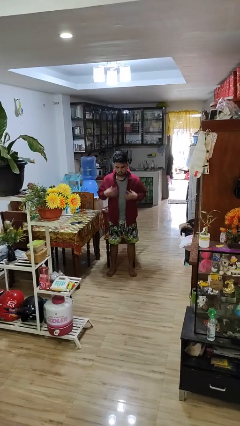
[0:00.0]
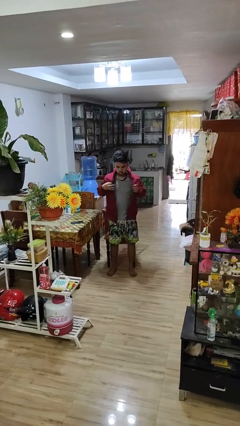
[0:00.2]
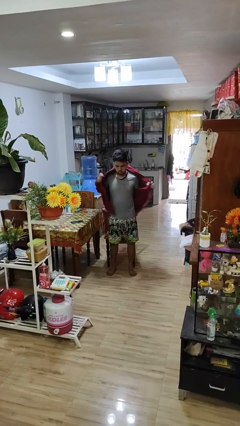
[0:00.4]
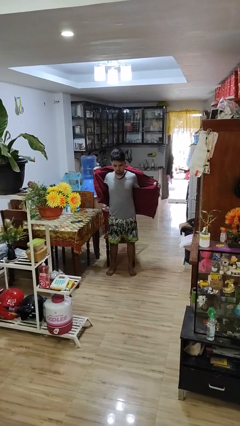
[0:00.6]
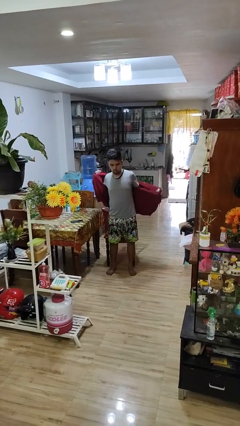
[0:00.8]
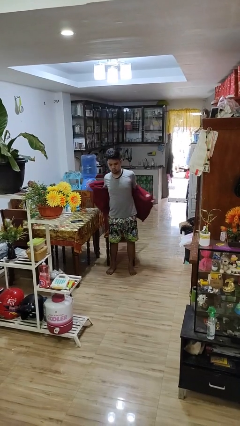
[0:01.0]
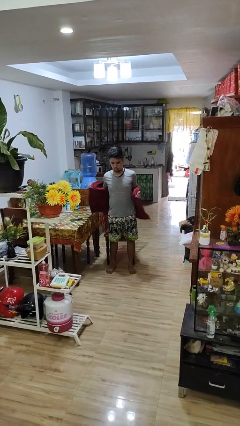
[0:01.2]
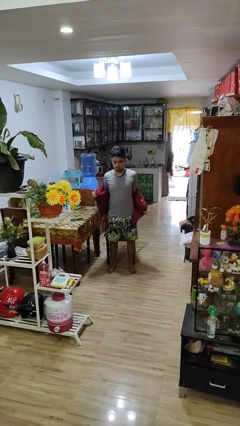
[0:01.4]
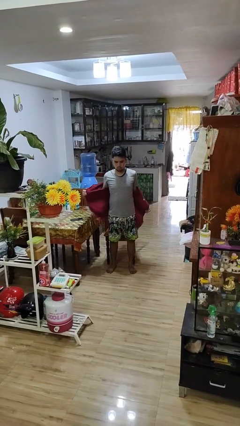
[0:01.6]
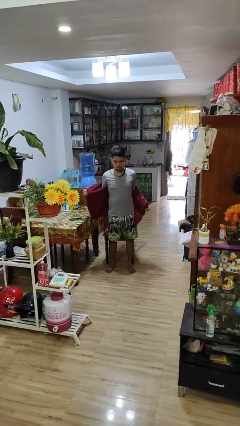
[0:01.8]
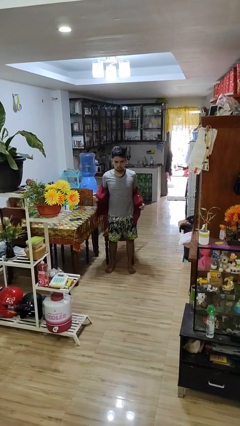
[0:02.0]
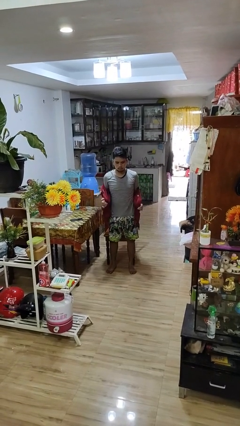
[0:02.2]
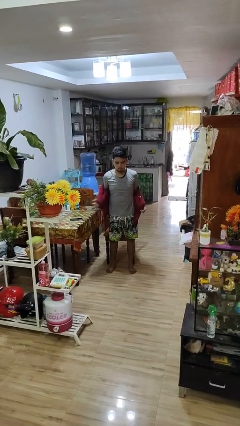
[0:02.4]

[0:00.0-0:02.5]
person takes off jacket

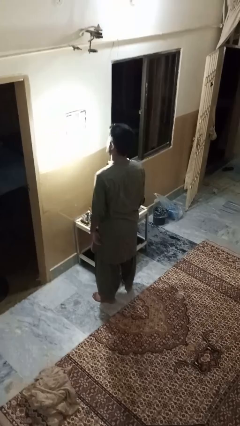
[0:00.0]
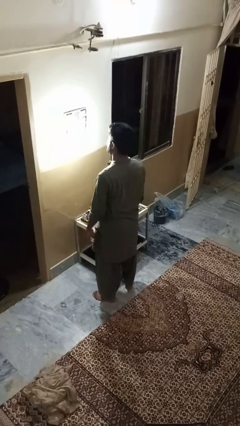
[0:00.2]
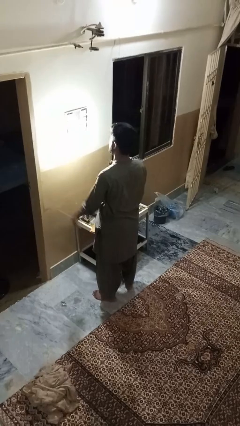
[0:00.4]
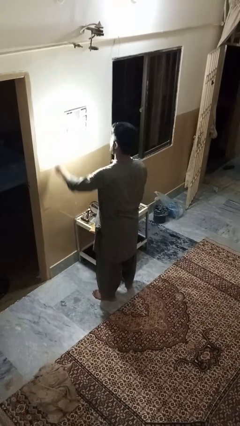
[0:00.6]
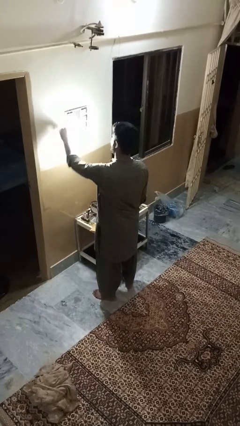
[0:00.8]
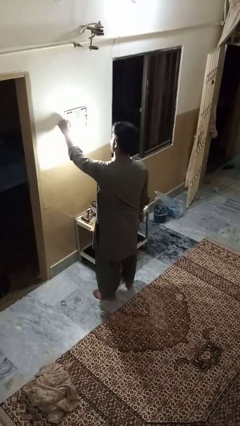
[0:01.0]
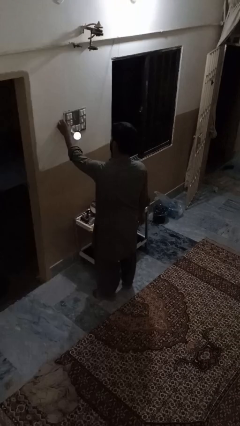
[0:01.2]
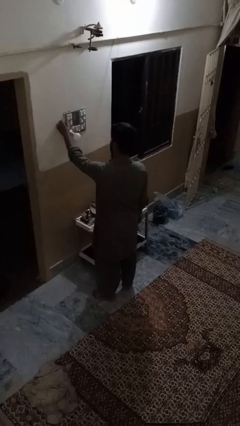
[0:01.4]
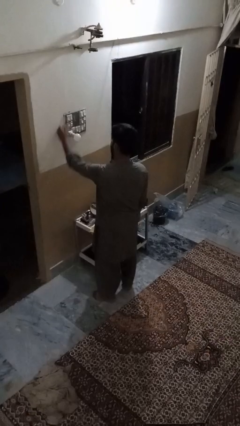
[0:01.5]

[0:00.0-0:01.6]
person turns off lamp

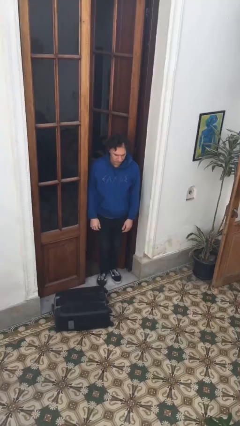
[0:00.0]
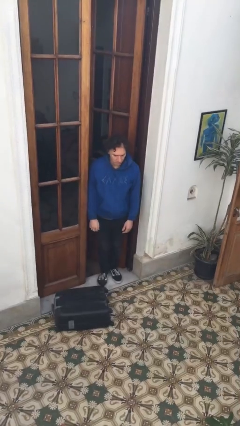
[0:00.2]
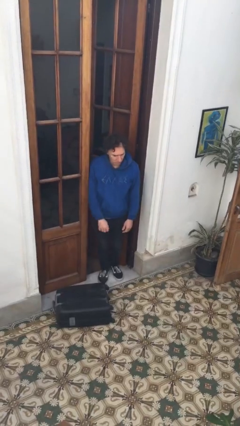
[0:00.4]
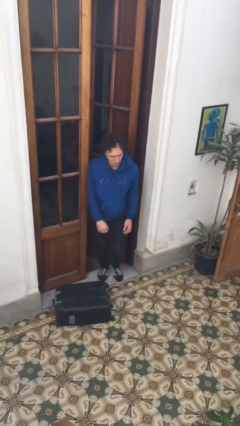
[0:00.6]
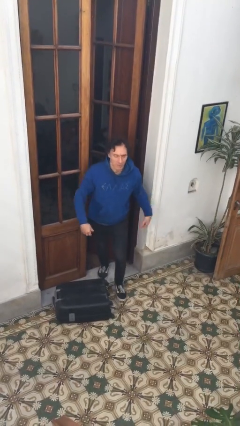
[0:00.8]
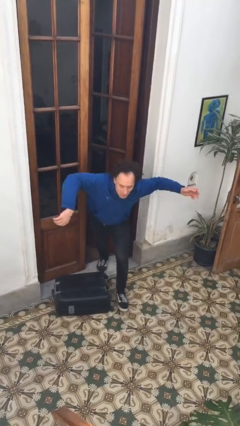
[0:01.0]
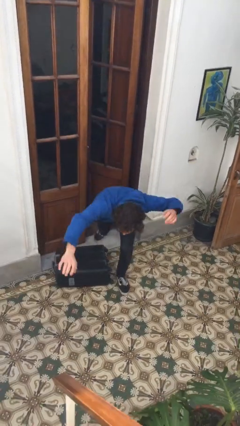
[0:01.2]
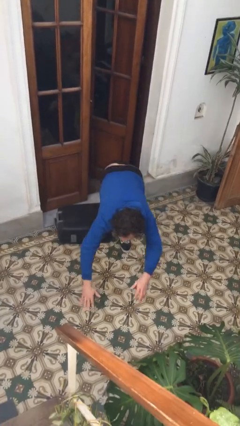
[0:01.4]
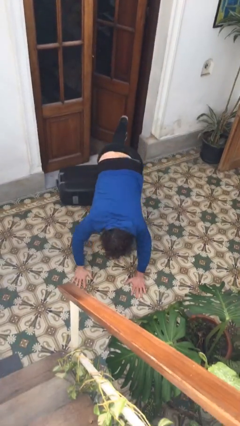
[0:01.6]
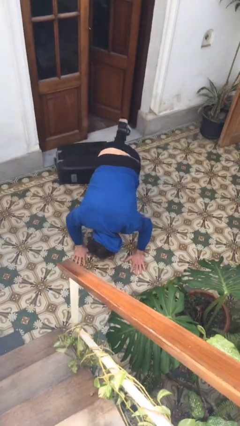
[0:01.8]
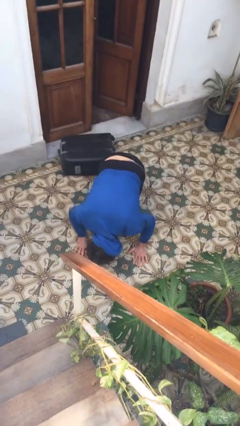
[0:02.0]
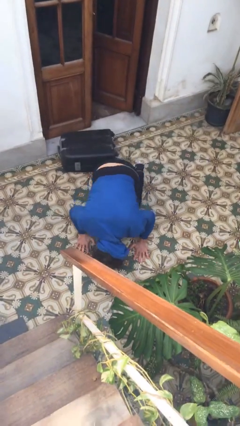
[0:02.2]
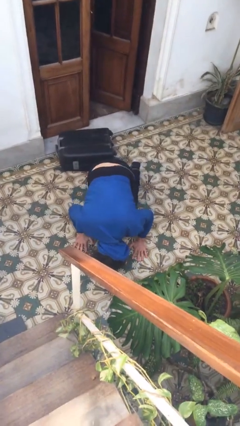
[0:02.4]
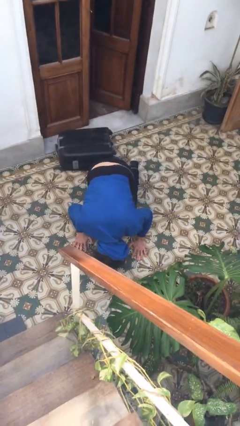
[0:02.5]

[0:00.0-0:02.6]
person trips on object on floor

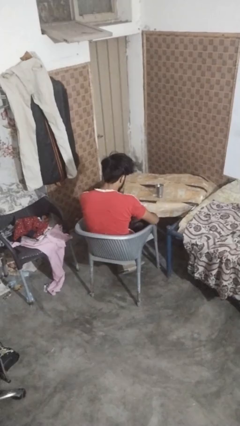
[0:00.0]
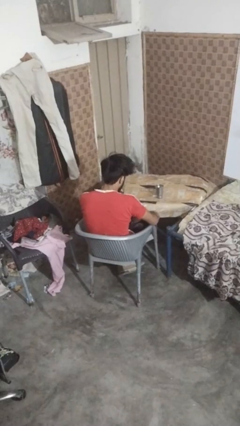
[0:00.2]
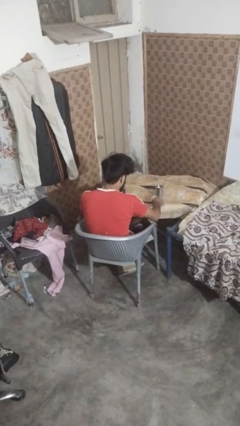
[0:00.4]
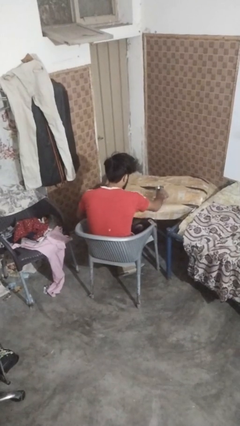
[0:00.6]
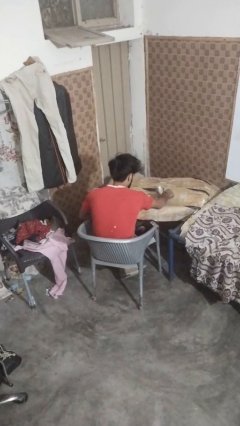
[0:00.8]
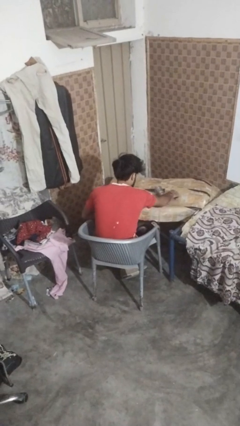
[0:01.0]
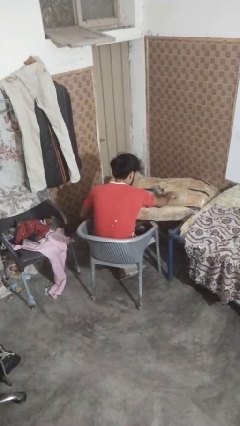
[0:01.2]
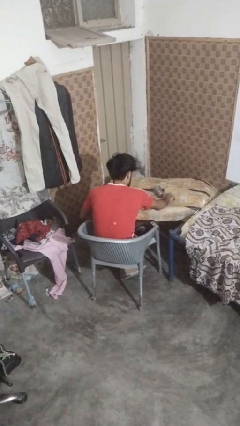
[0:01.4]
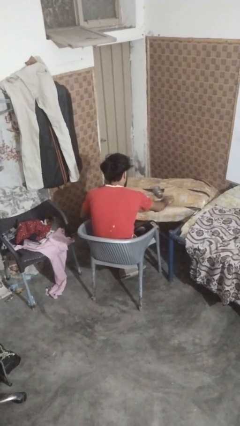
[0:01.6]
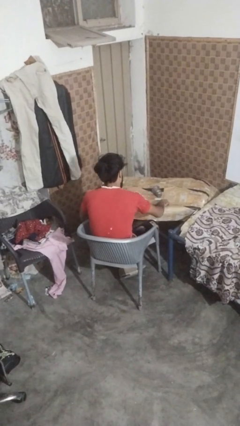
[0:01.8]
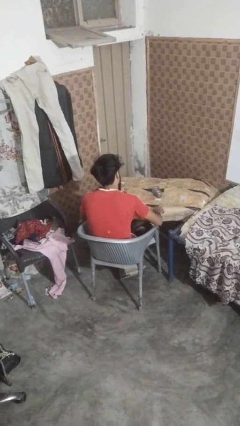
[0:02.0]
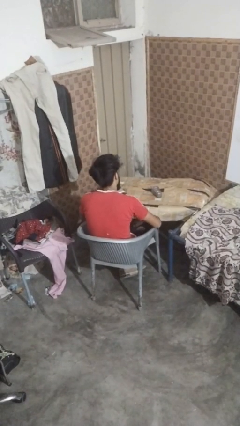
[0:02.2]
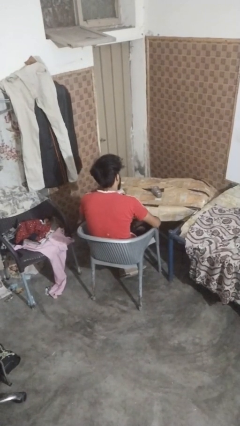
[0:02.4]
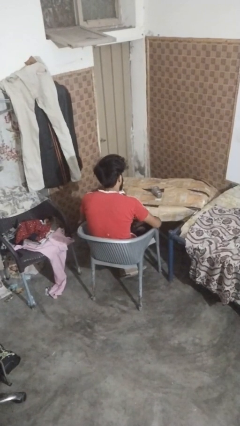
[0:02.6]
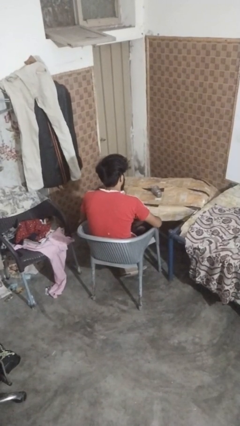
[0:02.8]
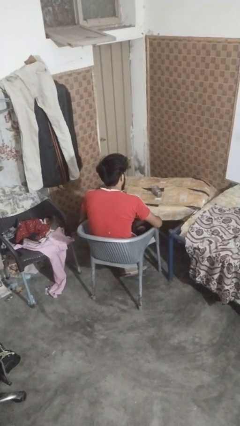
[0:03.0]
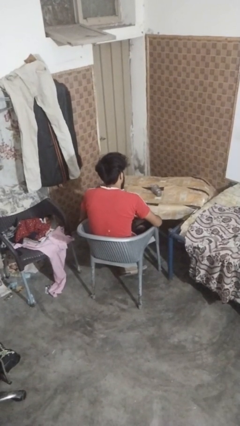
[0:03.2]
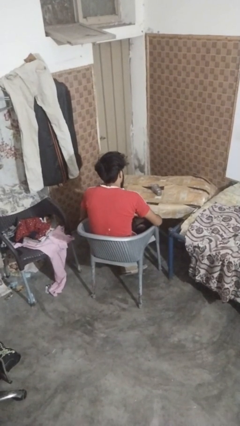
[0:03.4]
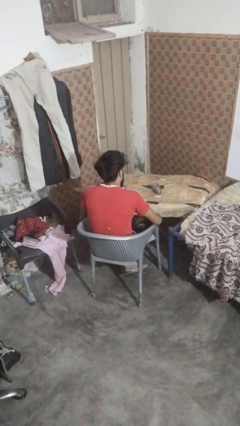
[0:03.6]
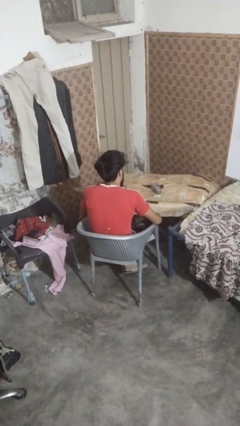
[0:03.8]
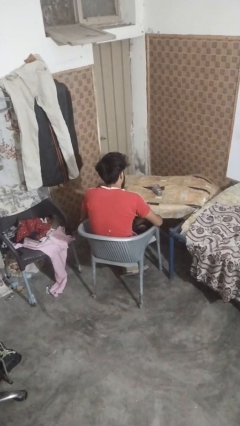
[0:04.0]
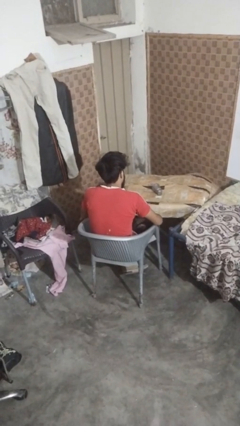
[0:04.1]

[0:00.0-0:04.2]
person knocks over glass

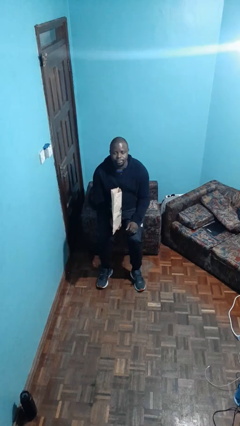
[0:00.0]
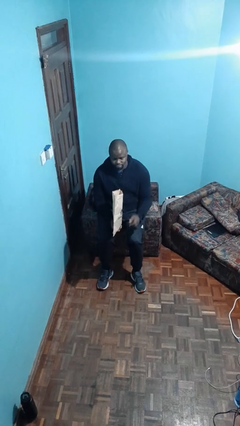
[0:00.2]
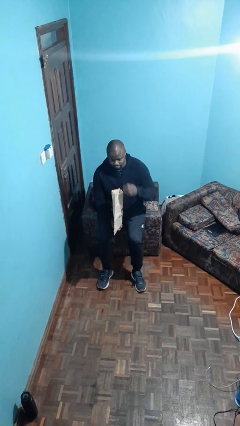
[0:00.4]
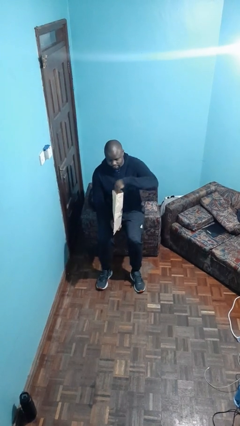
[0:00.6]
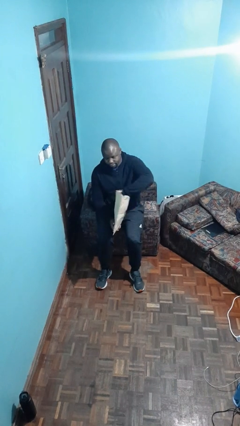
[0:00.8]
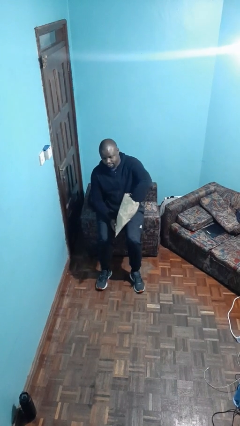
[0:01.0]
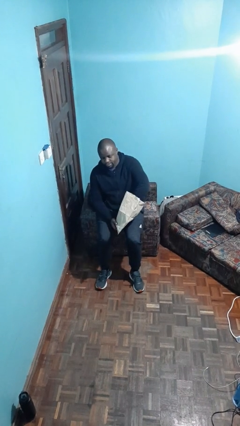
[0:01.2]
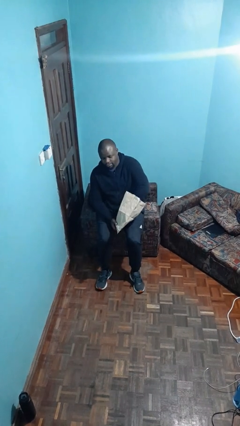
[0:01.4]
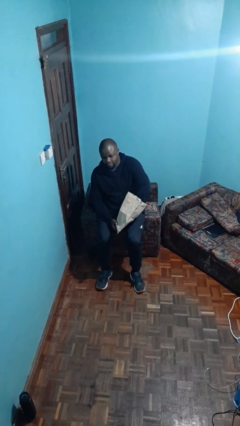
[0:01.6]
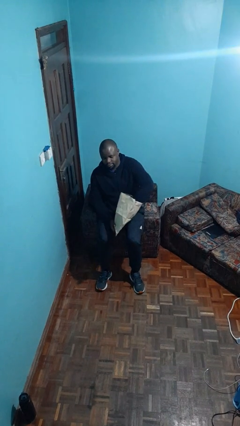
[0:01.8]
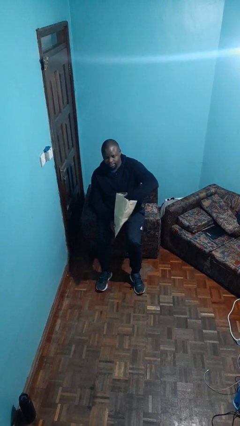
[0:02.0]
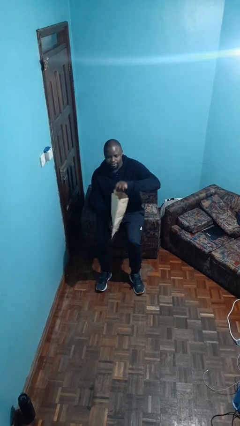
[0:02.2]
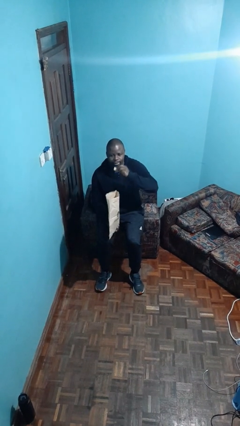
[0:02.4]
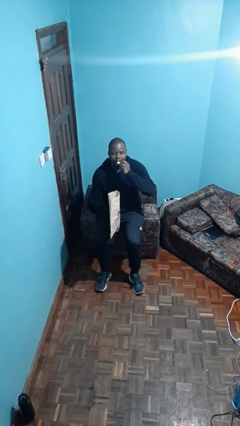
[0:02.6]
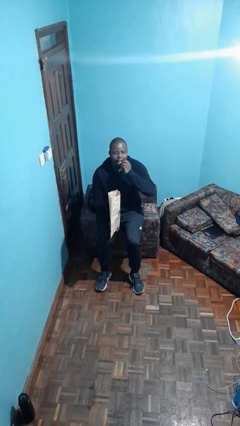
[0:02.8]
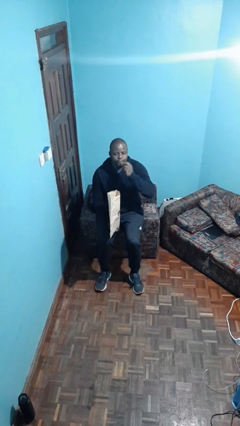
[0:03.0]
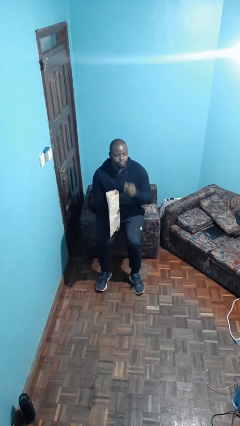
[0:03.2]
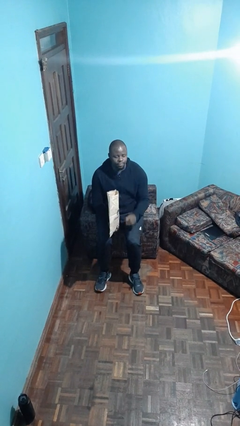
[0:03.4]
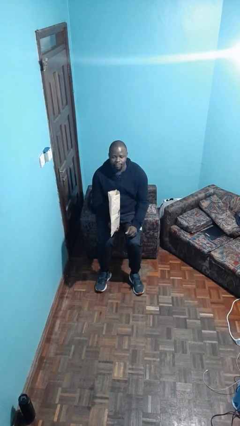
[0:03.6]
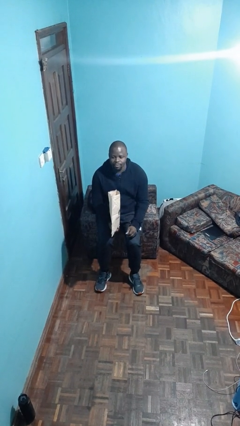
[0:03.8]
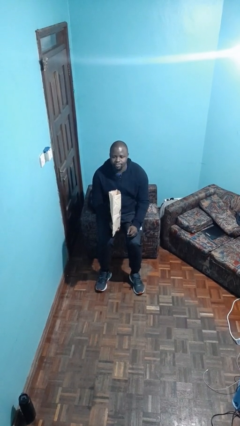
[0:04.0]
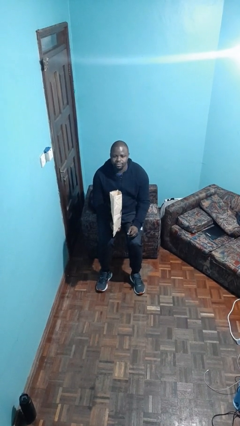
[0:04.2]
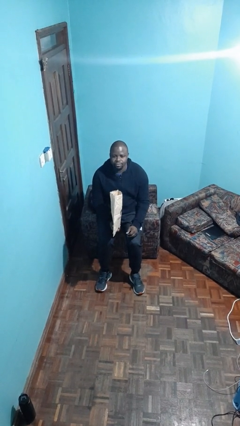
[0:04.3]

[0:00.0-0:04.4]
person eats snack from bag

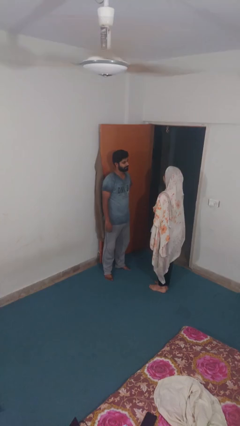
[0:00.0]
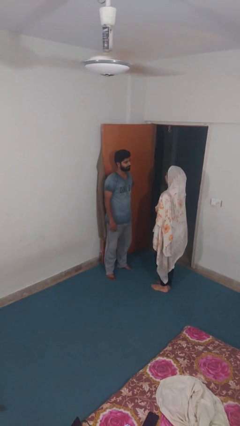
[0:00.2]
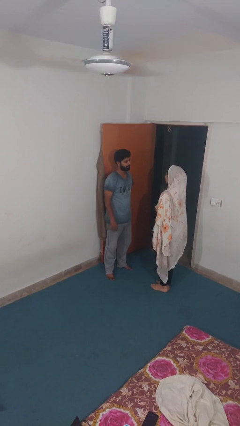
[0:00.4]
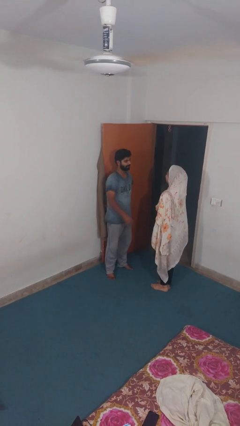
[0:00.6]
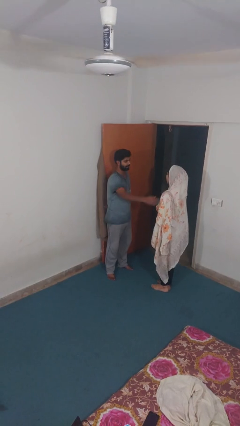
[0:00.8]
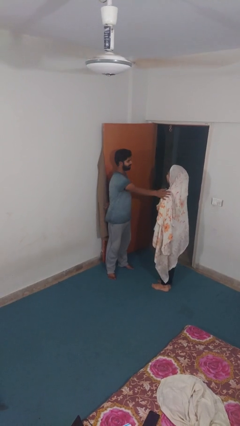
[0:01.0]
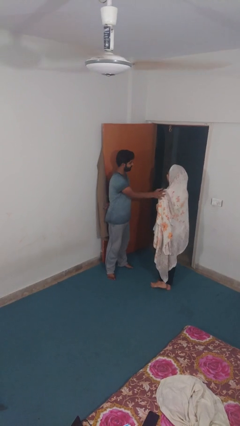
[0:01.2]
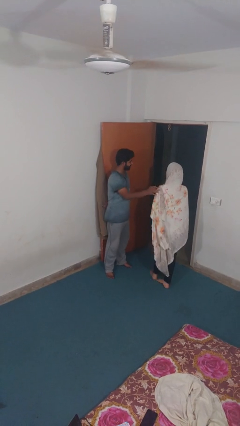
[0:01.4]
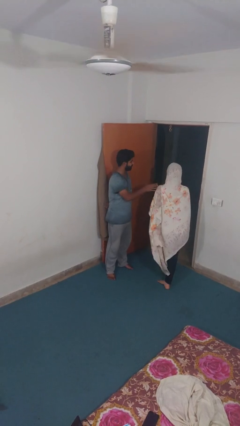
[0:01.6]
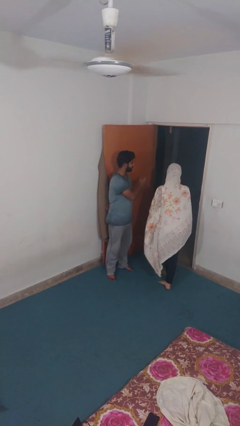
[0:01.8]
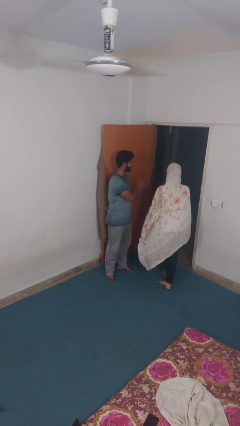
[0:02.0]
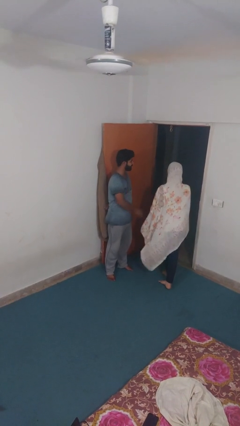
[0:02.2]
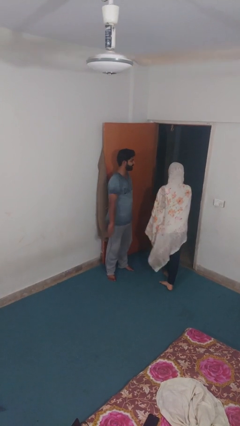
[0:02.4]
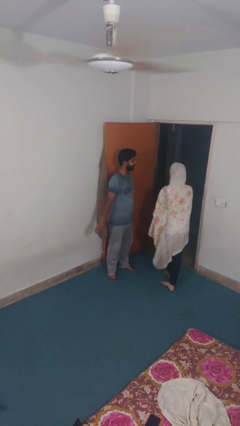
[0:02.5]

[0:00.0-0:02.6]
person shoves person
